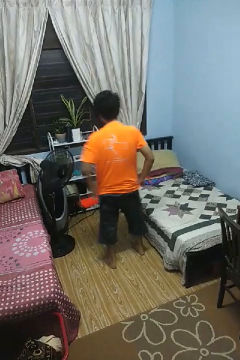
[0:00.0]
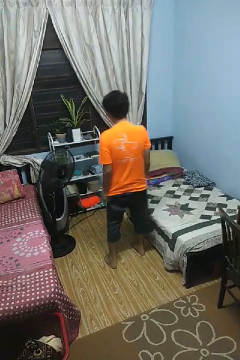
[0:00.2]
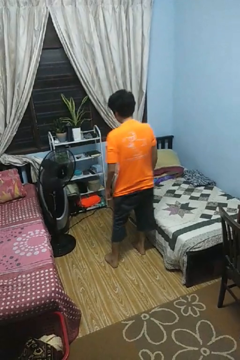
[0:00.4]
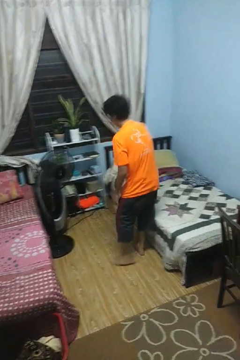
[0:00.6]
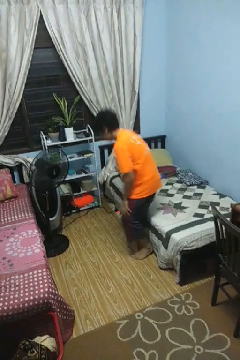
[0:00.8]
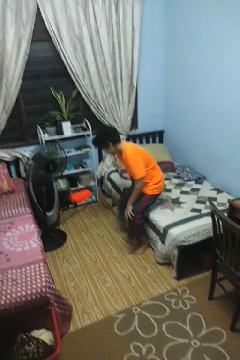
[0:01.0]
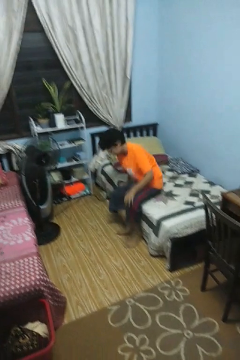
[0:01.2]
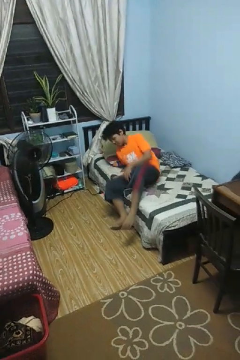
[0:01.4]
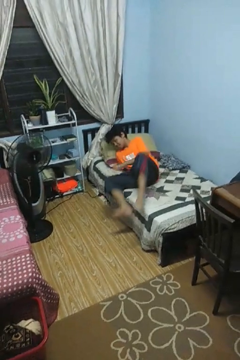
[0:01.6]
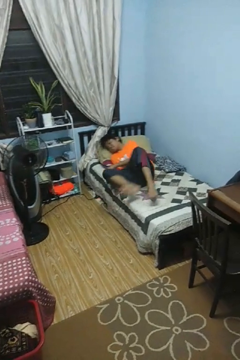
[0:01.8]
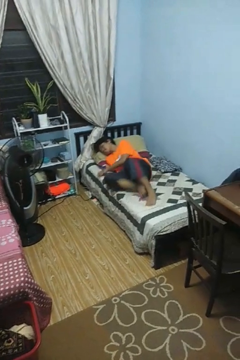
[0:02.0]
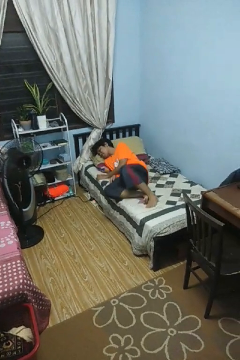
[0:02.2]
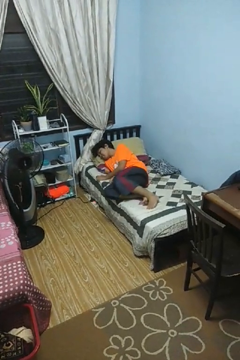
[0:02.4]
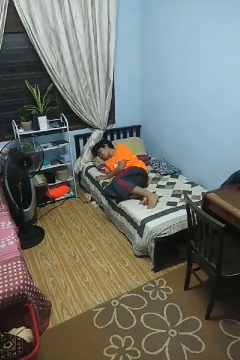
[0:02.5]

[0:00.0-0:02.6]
person lies down on bed

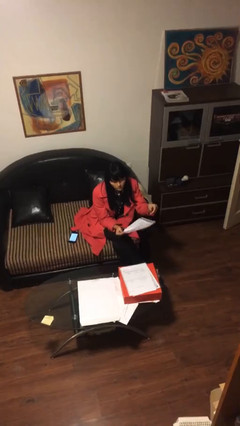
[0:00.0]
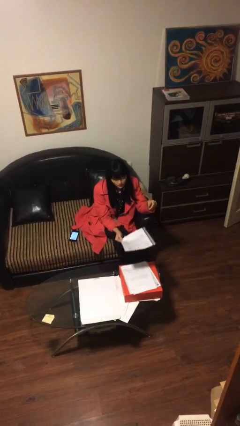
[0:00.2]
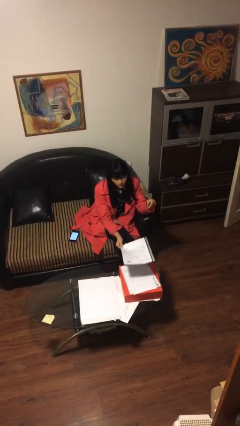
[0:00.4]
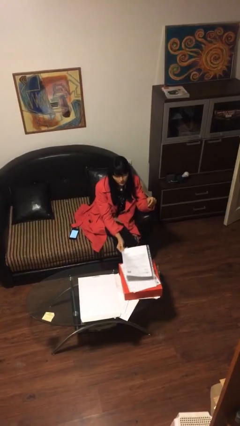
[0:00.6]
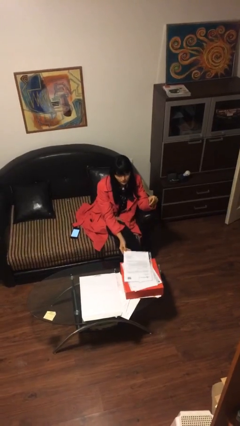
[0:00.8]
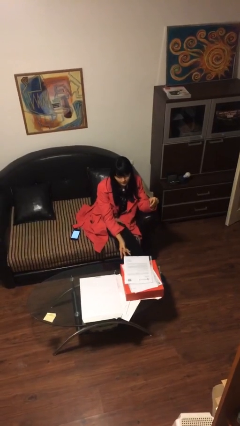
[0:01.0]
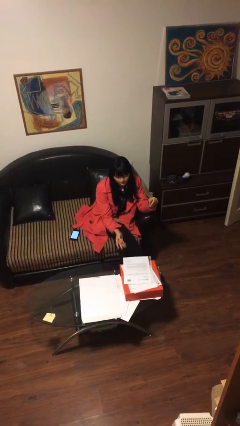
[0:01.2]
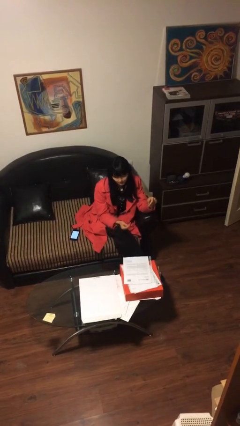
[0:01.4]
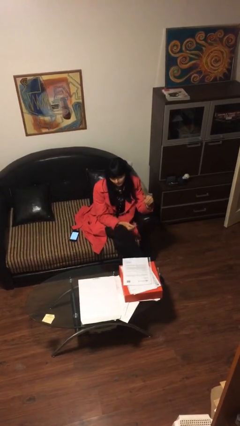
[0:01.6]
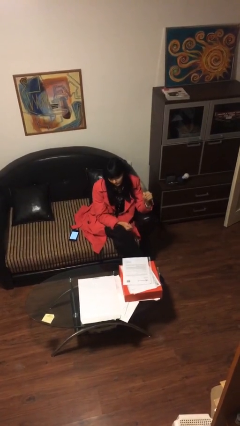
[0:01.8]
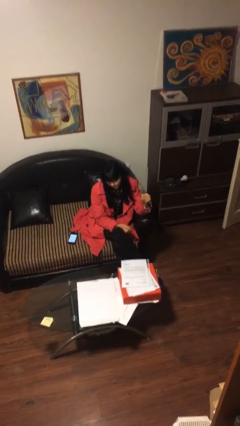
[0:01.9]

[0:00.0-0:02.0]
person puts down object on table

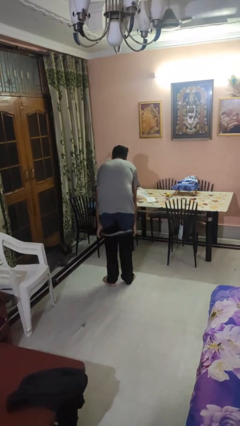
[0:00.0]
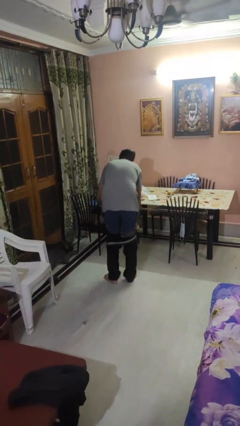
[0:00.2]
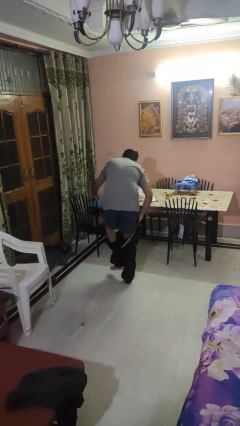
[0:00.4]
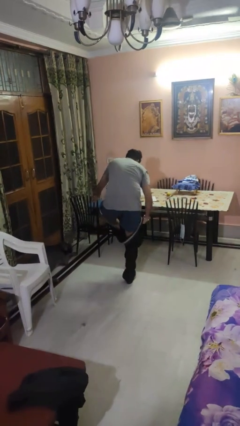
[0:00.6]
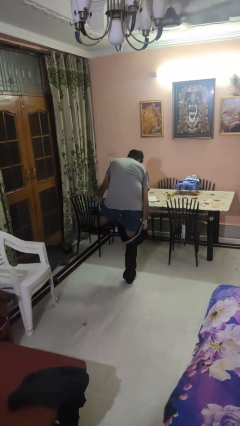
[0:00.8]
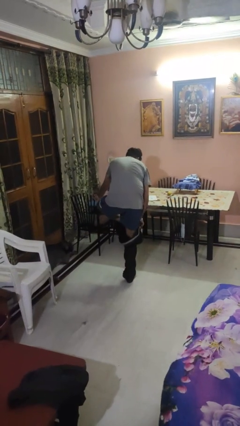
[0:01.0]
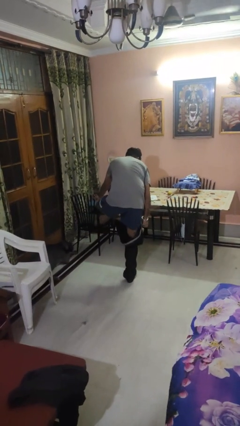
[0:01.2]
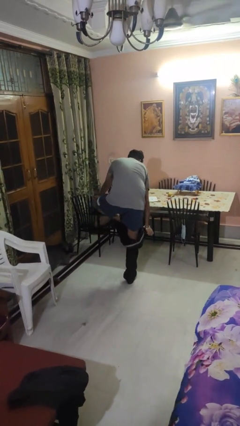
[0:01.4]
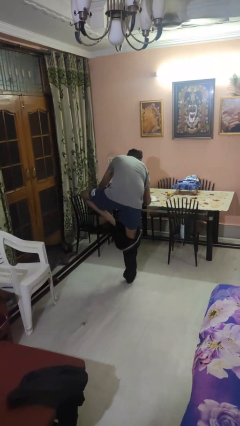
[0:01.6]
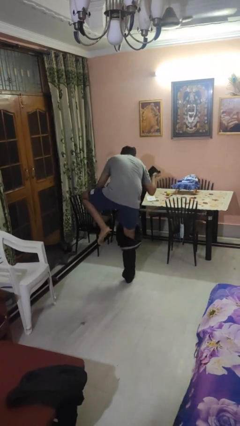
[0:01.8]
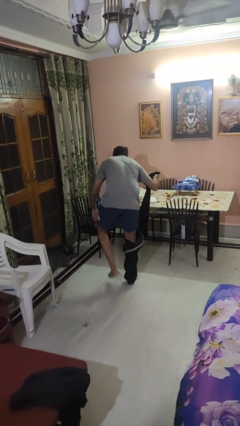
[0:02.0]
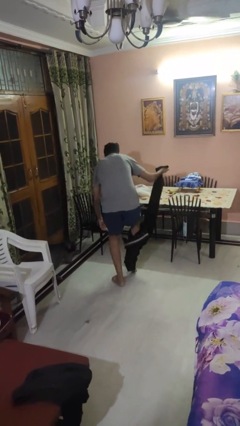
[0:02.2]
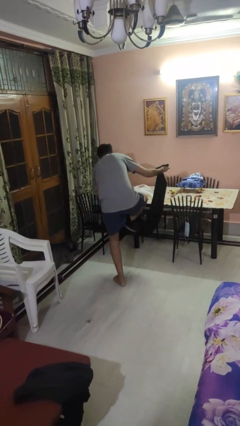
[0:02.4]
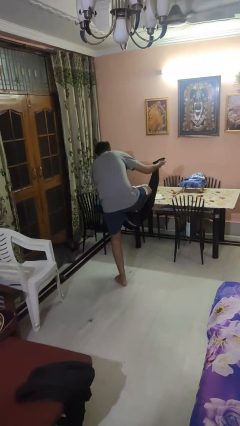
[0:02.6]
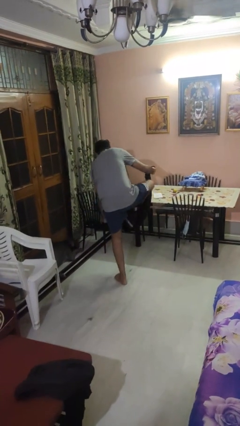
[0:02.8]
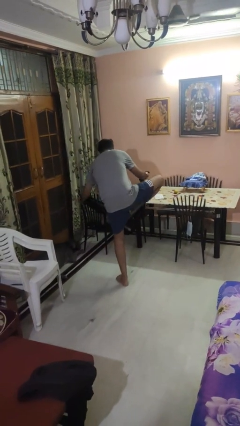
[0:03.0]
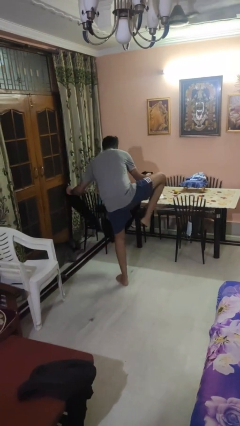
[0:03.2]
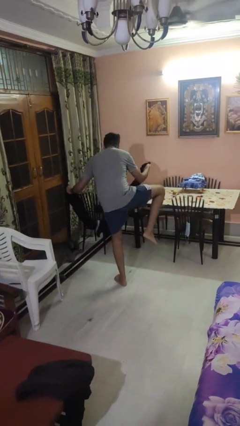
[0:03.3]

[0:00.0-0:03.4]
person takes off pants

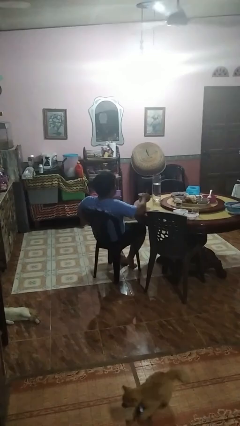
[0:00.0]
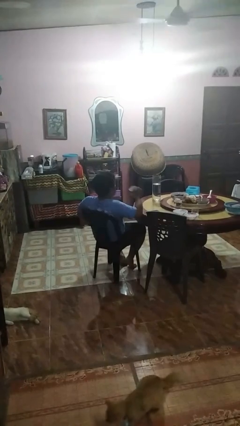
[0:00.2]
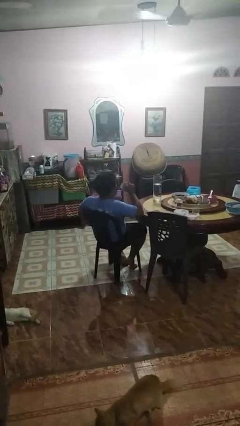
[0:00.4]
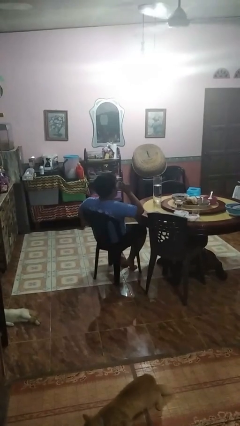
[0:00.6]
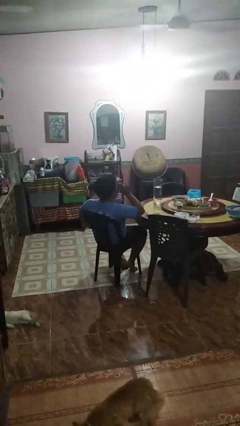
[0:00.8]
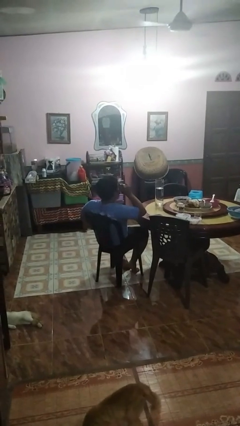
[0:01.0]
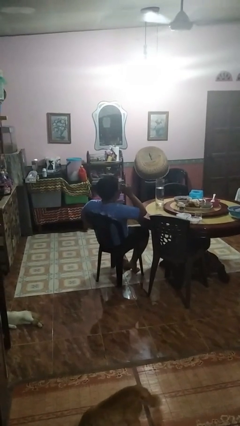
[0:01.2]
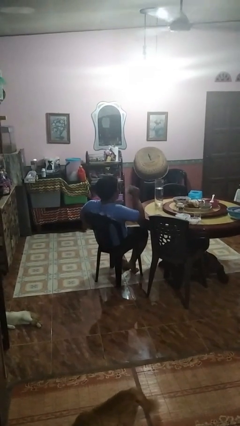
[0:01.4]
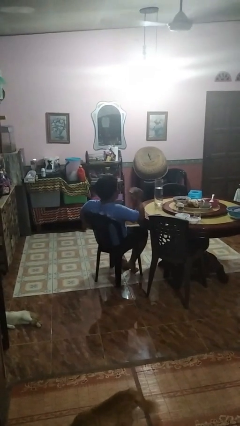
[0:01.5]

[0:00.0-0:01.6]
person drinks from mug

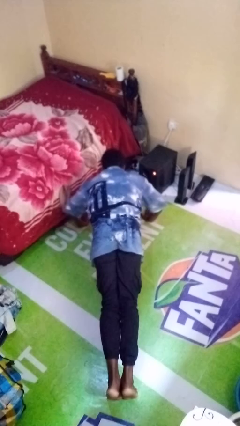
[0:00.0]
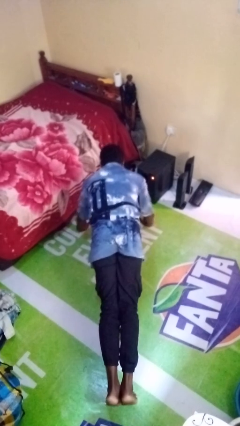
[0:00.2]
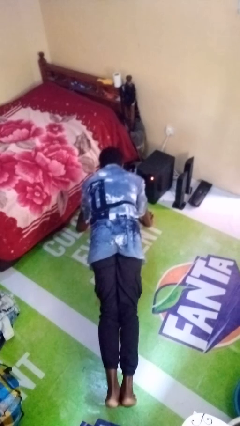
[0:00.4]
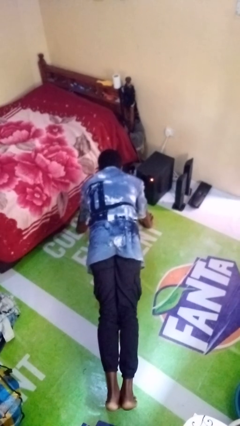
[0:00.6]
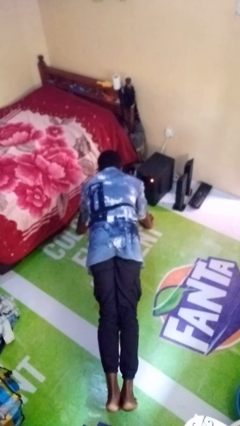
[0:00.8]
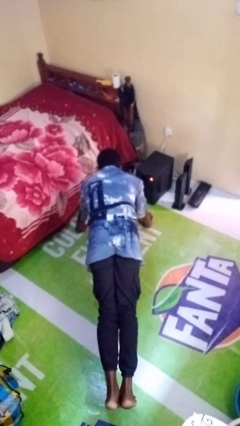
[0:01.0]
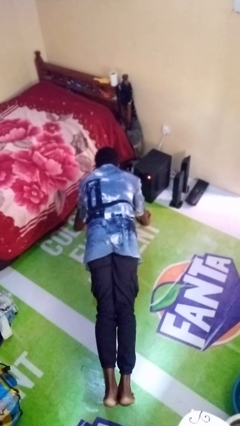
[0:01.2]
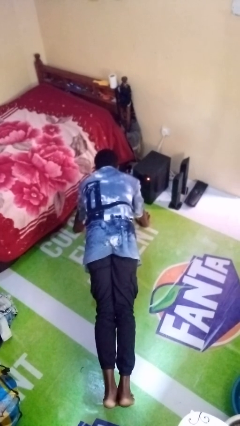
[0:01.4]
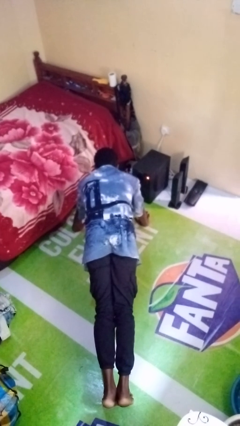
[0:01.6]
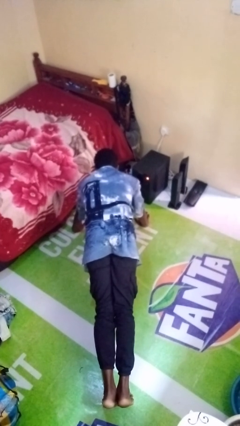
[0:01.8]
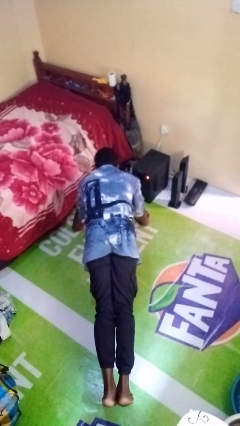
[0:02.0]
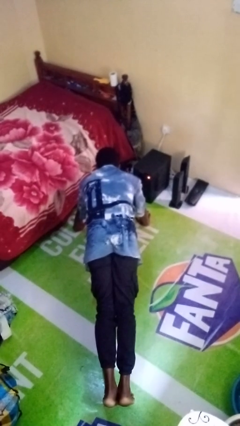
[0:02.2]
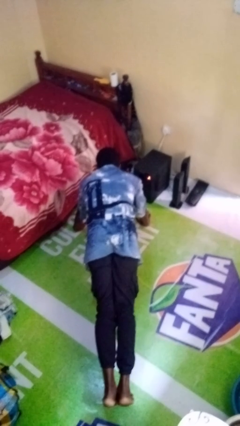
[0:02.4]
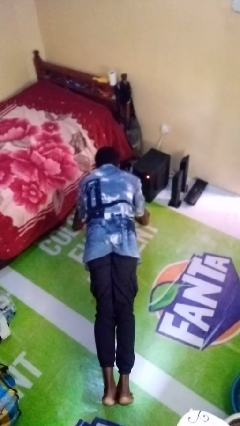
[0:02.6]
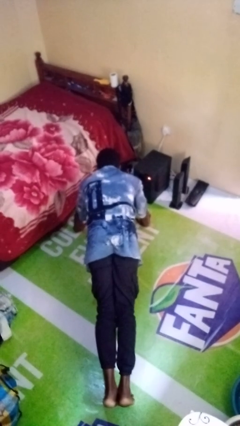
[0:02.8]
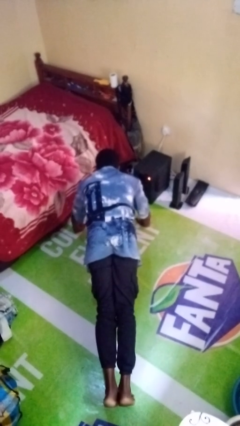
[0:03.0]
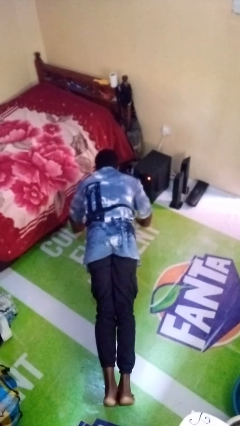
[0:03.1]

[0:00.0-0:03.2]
person exercises with pushup

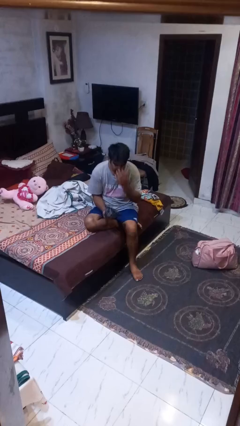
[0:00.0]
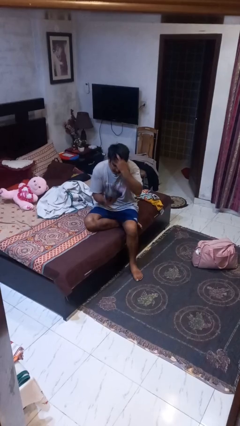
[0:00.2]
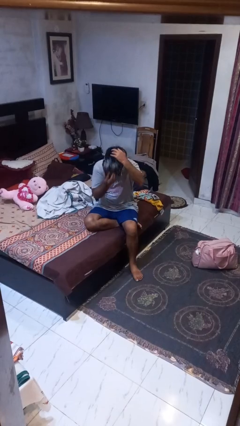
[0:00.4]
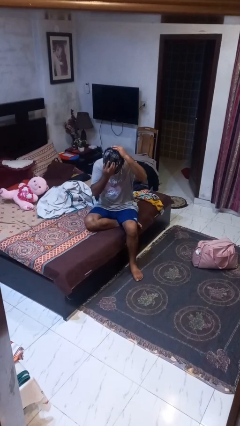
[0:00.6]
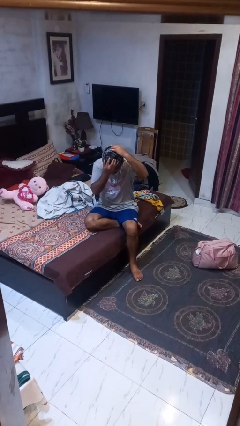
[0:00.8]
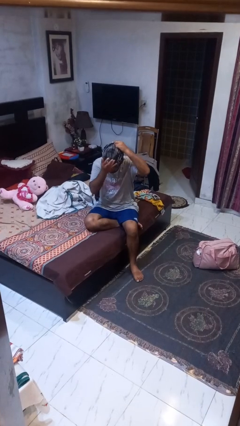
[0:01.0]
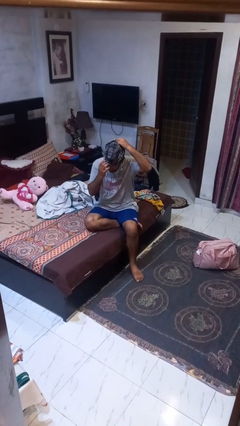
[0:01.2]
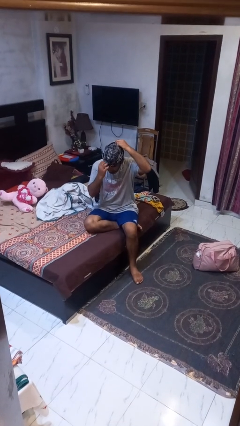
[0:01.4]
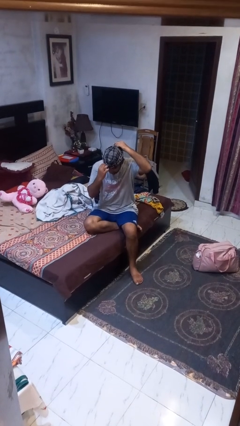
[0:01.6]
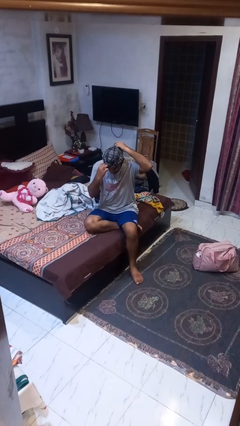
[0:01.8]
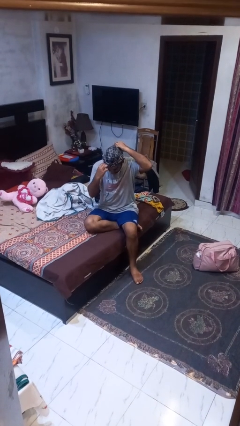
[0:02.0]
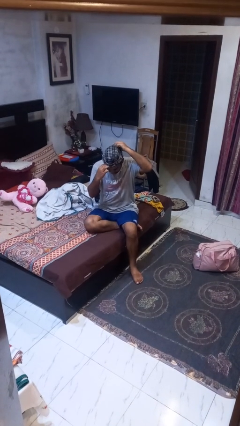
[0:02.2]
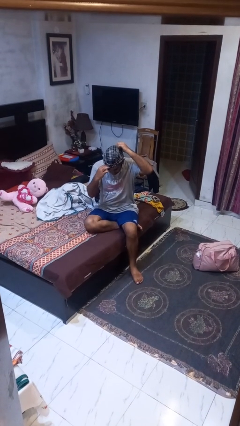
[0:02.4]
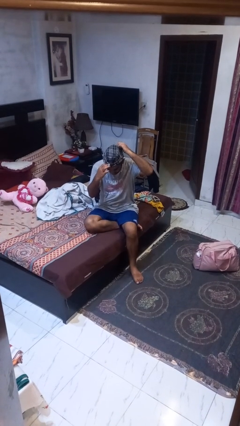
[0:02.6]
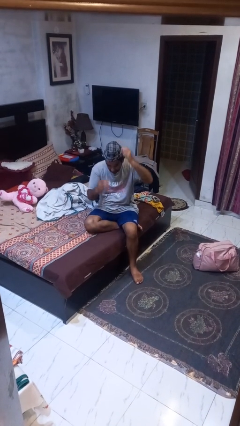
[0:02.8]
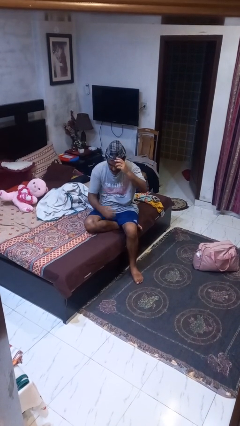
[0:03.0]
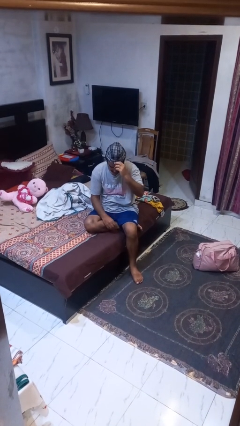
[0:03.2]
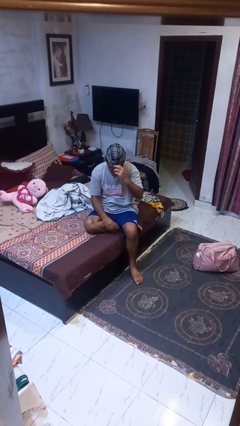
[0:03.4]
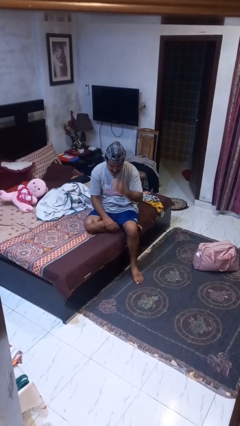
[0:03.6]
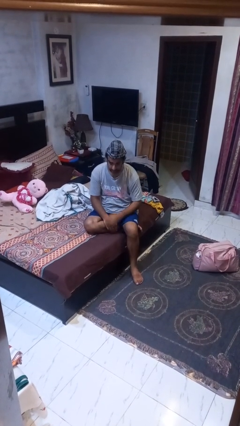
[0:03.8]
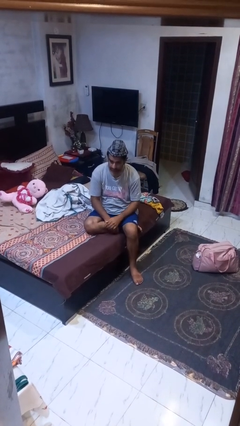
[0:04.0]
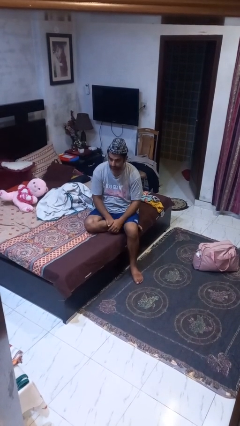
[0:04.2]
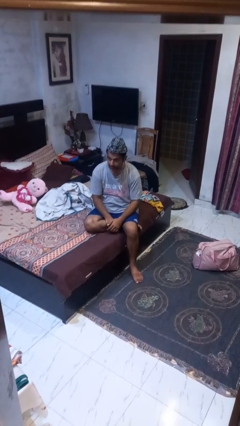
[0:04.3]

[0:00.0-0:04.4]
person puts on hat

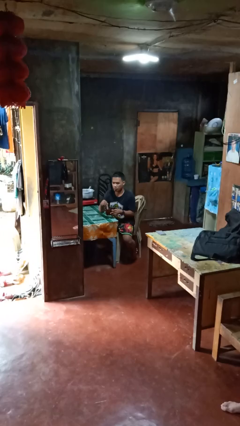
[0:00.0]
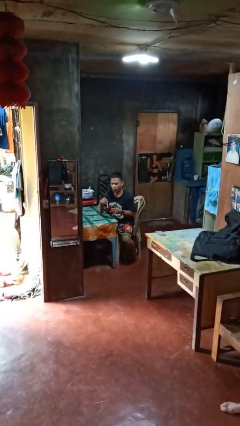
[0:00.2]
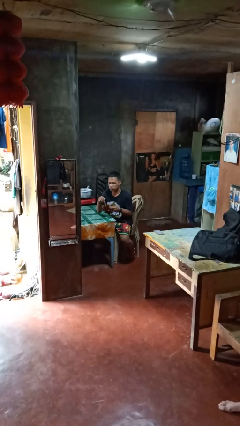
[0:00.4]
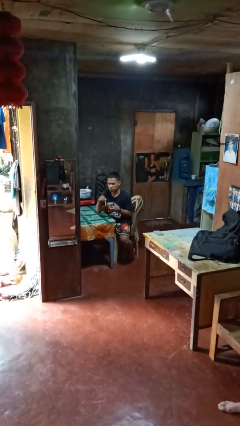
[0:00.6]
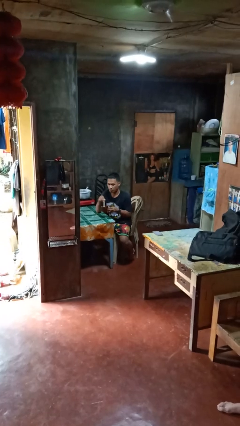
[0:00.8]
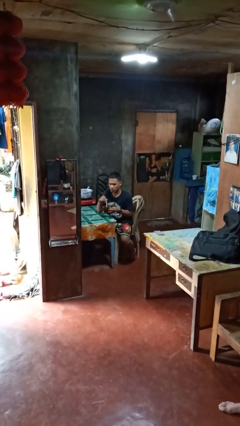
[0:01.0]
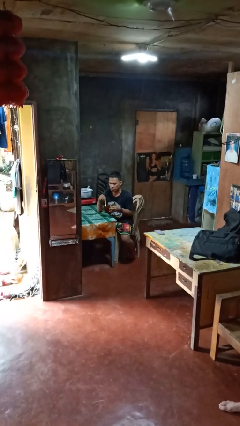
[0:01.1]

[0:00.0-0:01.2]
person stirs mug
